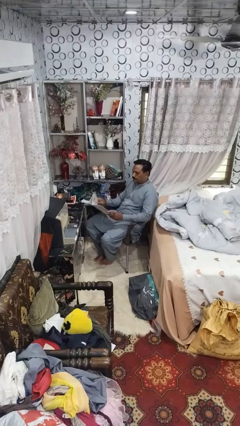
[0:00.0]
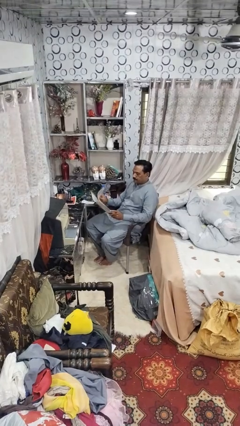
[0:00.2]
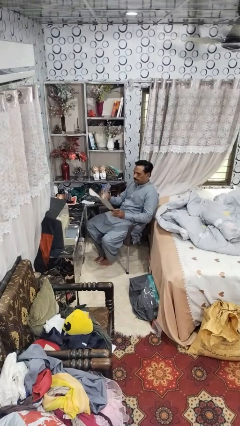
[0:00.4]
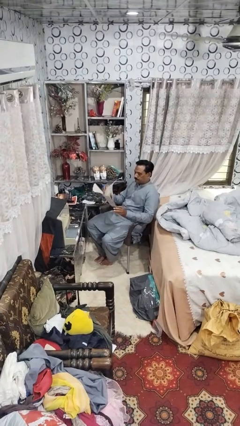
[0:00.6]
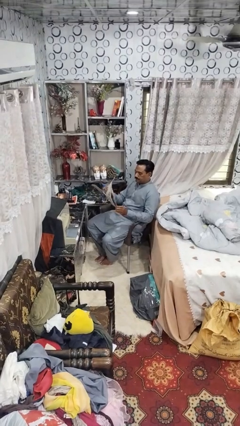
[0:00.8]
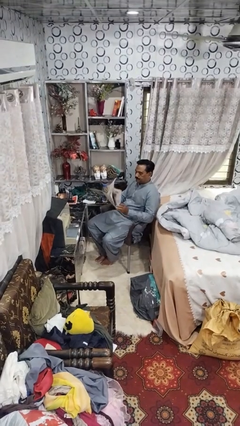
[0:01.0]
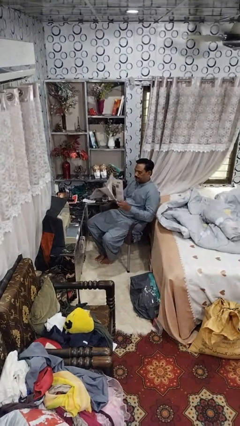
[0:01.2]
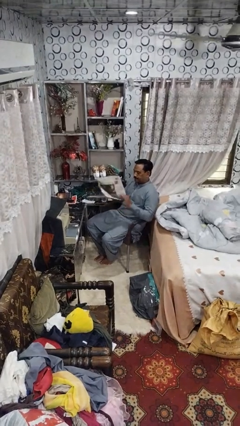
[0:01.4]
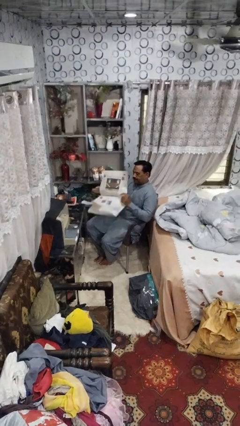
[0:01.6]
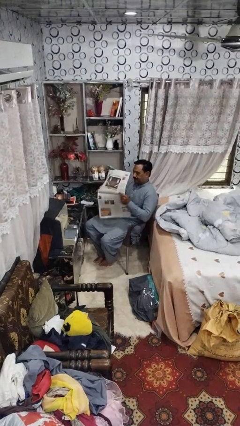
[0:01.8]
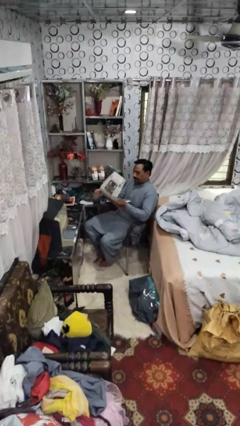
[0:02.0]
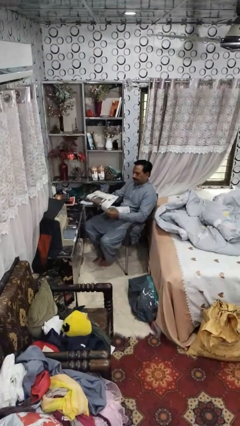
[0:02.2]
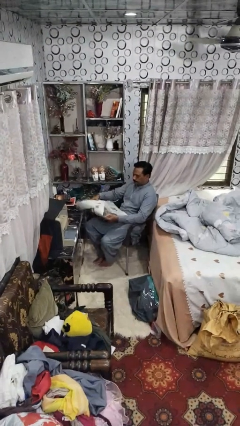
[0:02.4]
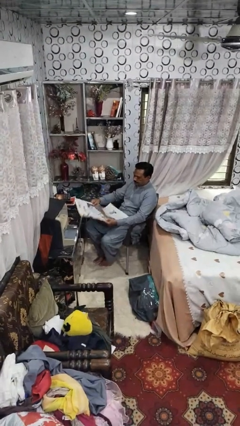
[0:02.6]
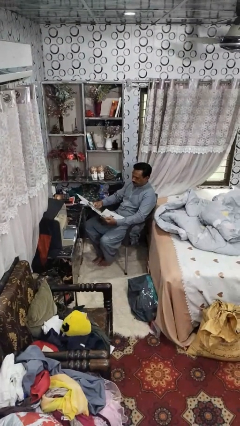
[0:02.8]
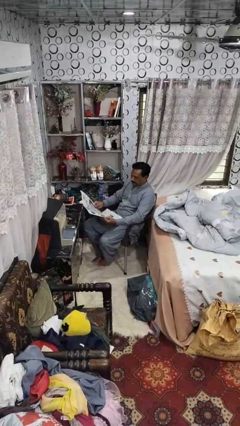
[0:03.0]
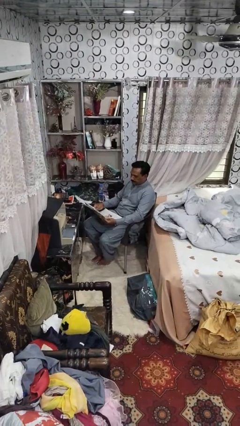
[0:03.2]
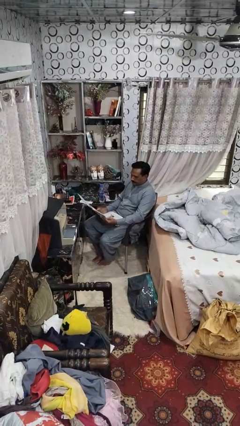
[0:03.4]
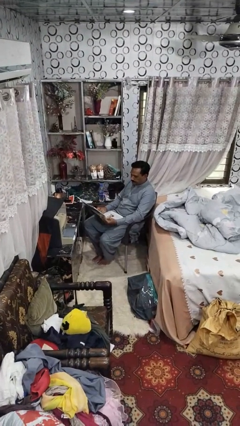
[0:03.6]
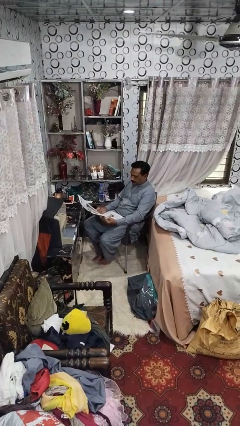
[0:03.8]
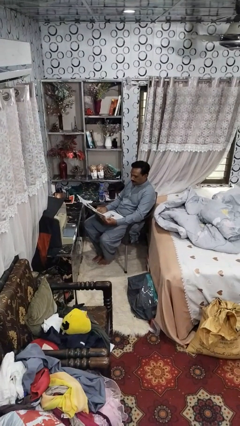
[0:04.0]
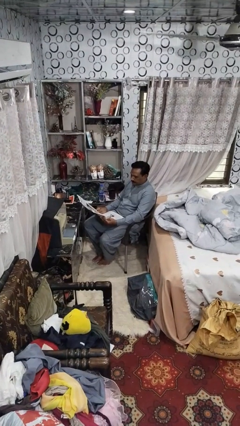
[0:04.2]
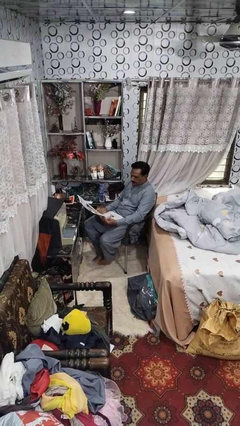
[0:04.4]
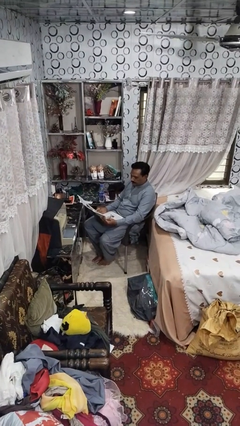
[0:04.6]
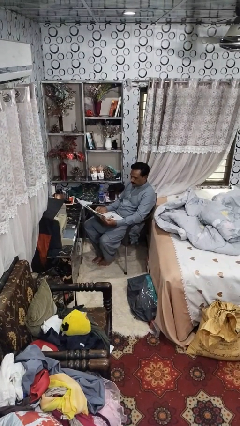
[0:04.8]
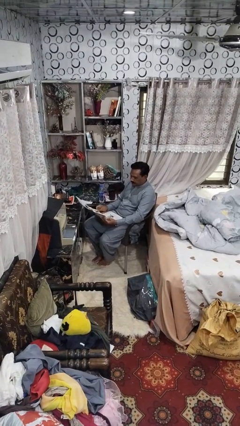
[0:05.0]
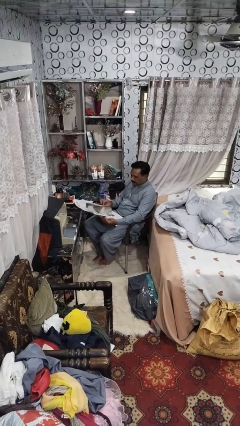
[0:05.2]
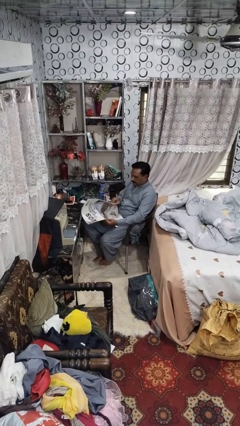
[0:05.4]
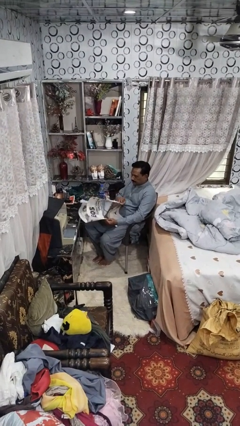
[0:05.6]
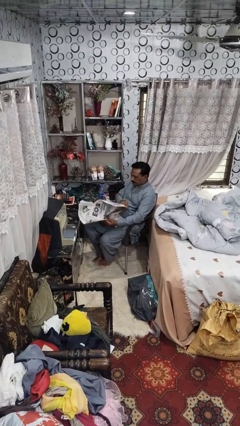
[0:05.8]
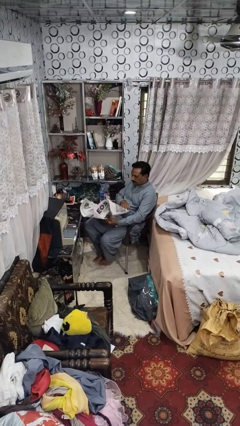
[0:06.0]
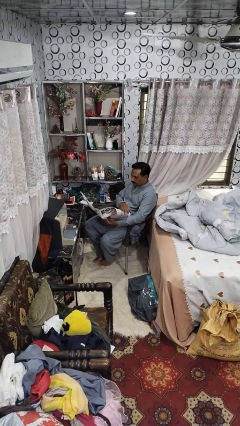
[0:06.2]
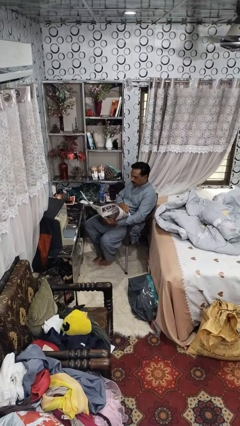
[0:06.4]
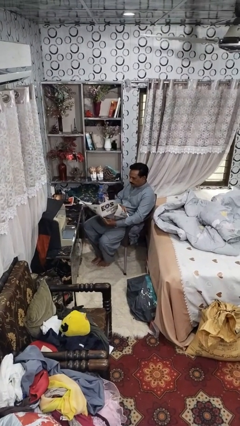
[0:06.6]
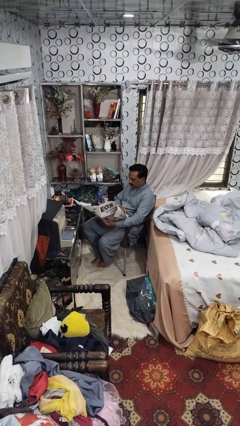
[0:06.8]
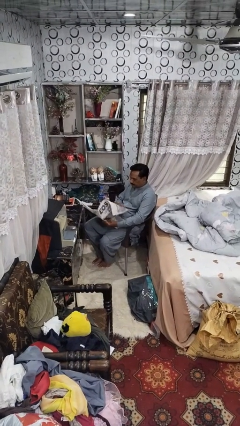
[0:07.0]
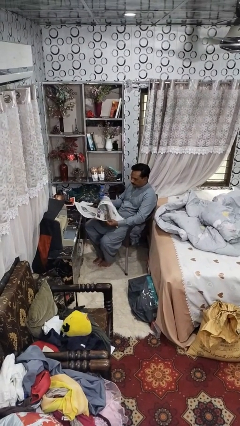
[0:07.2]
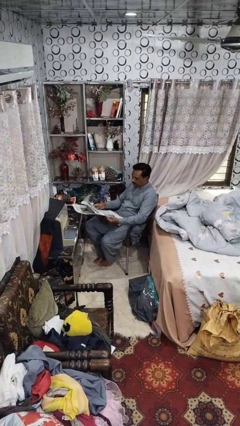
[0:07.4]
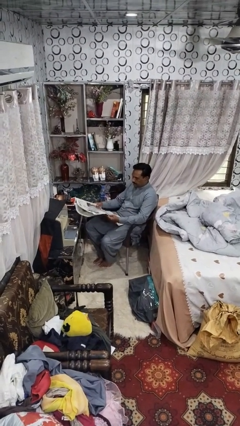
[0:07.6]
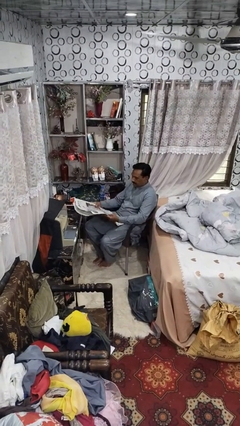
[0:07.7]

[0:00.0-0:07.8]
person reads newspaper

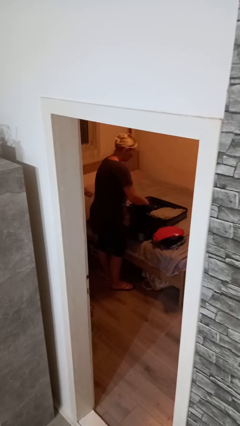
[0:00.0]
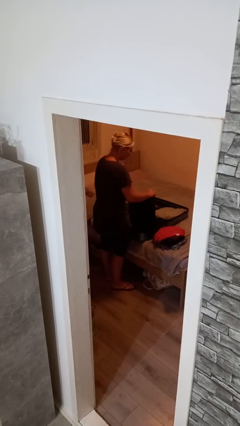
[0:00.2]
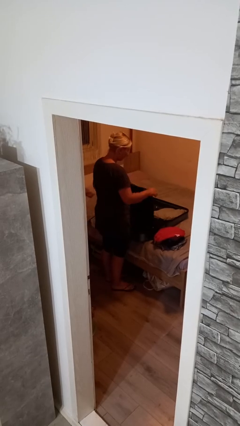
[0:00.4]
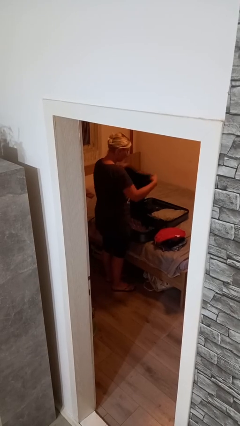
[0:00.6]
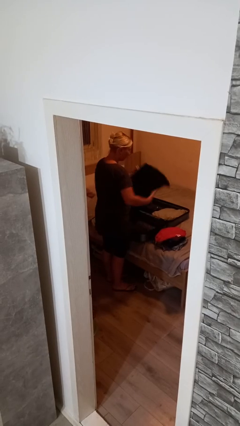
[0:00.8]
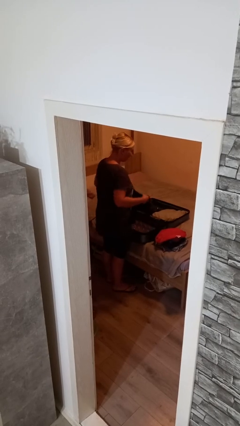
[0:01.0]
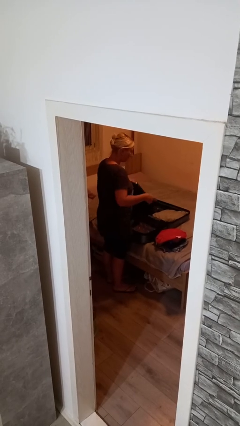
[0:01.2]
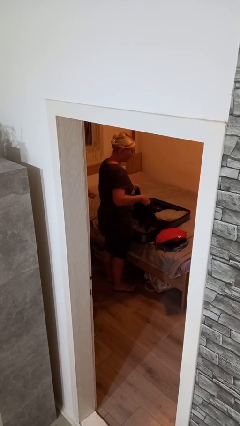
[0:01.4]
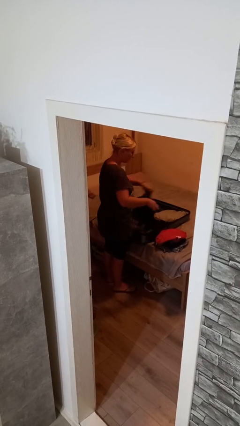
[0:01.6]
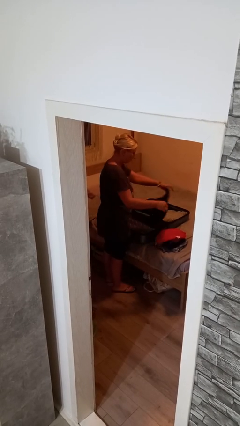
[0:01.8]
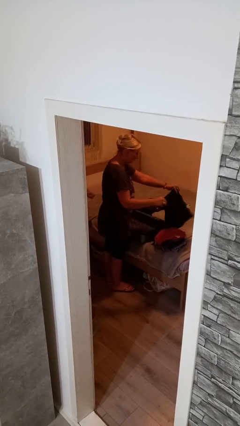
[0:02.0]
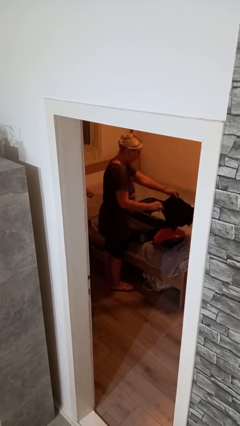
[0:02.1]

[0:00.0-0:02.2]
person unloads clothes from suitcase

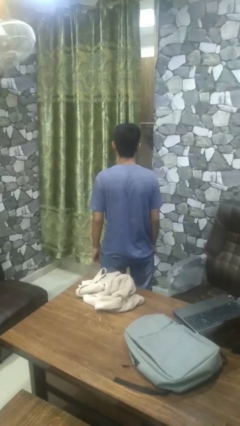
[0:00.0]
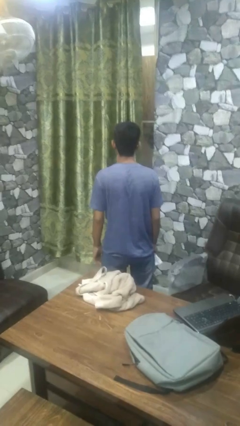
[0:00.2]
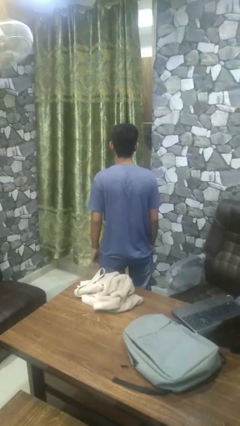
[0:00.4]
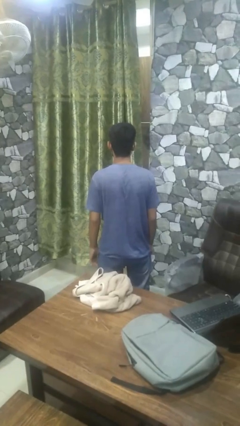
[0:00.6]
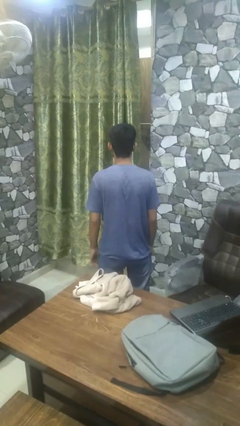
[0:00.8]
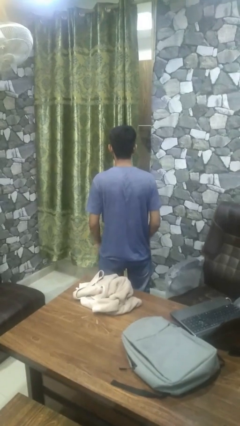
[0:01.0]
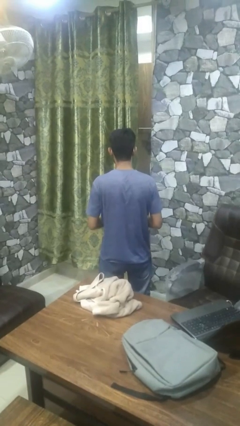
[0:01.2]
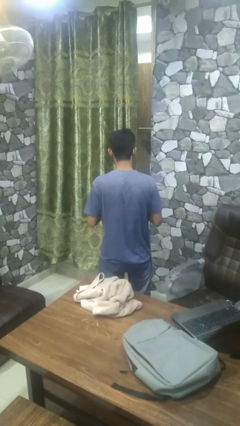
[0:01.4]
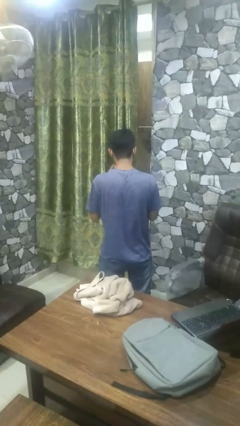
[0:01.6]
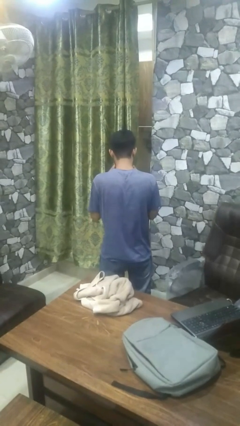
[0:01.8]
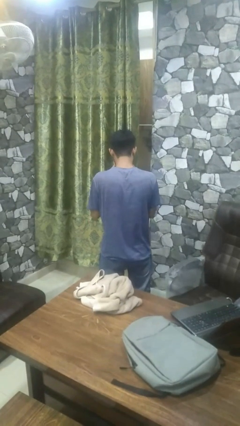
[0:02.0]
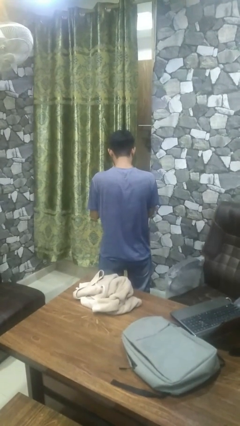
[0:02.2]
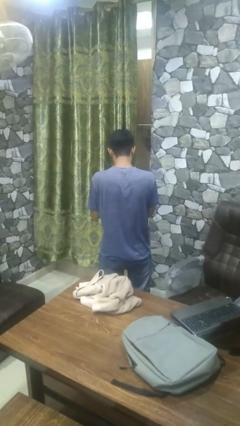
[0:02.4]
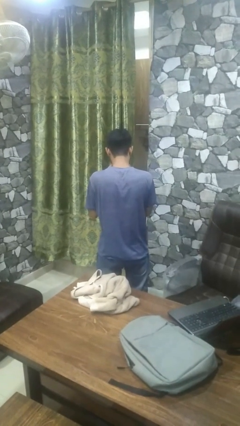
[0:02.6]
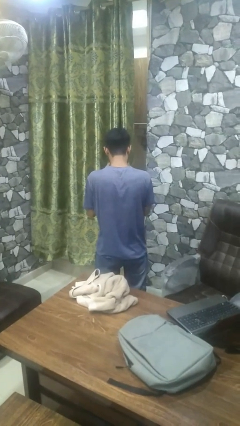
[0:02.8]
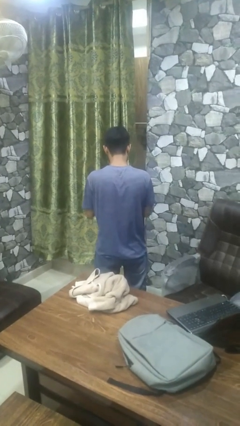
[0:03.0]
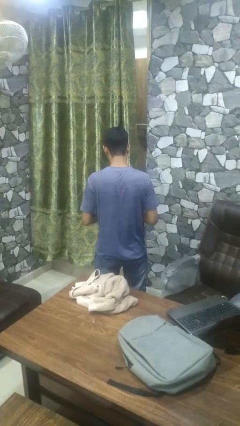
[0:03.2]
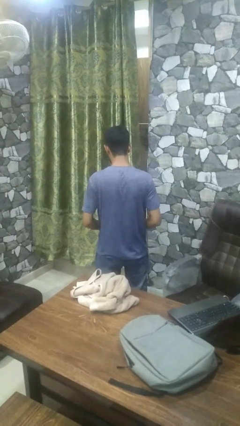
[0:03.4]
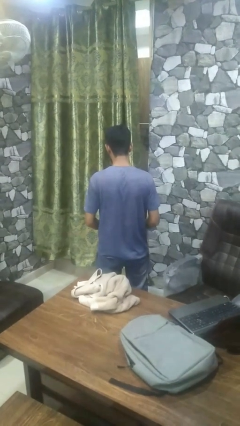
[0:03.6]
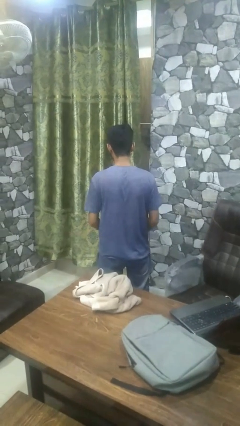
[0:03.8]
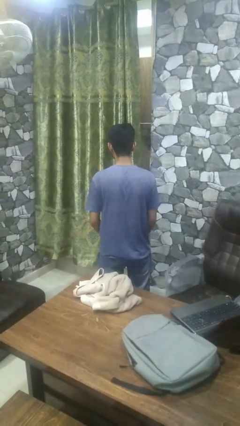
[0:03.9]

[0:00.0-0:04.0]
person blows nose

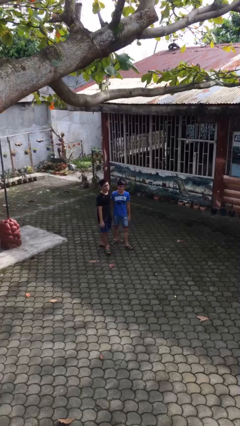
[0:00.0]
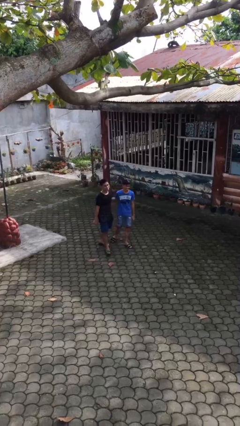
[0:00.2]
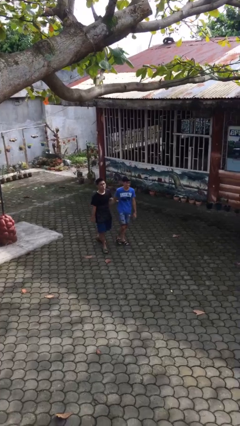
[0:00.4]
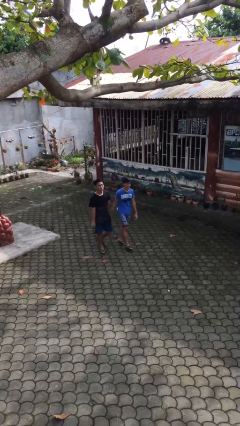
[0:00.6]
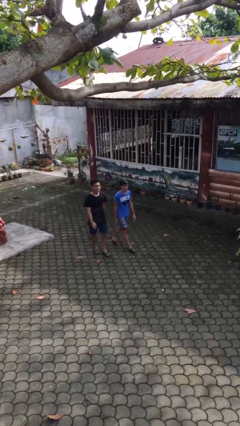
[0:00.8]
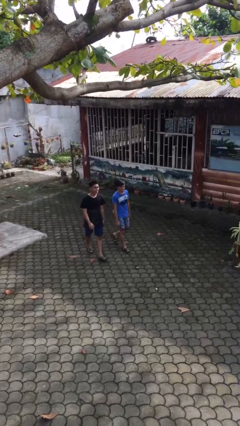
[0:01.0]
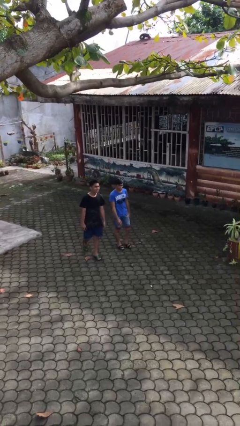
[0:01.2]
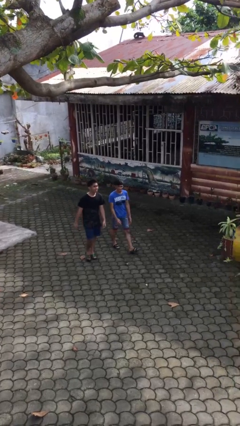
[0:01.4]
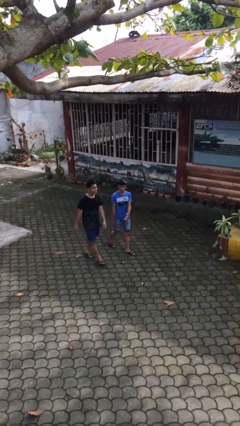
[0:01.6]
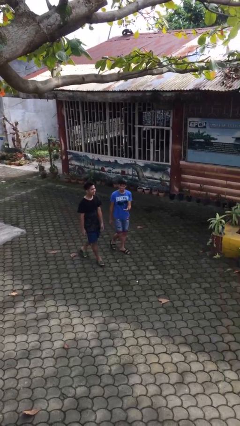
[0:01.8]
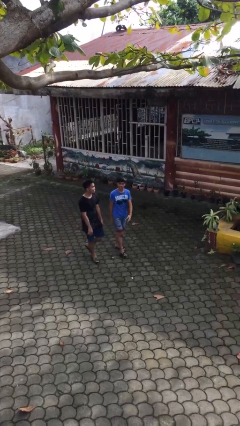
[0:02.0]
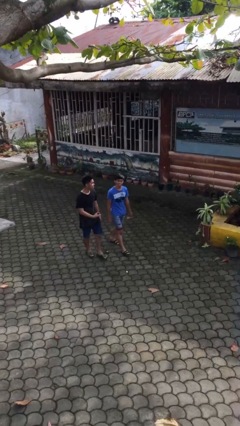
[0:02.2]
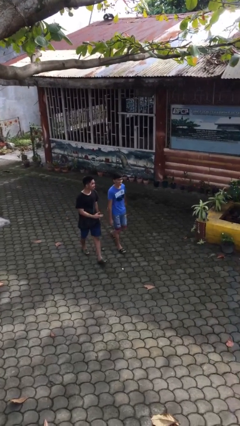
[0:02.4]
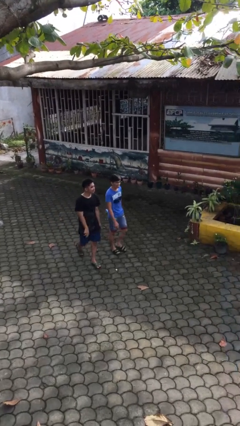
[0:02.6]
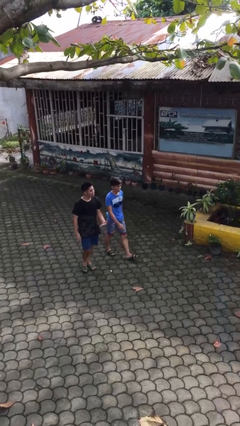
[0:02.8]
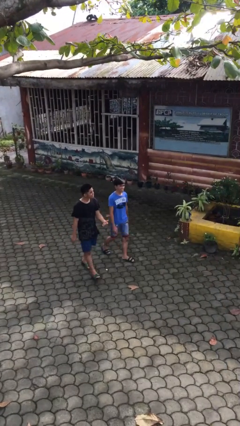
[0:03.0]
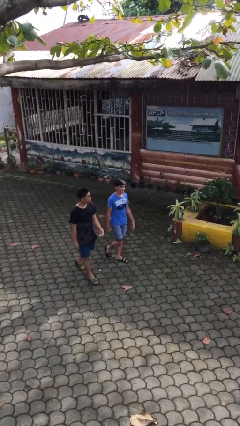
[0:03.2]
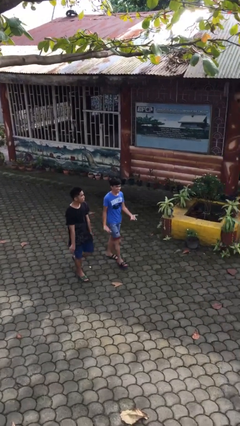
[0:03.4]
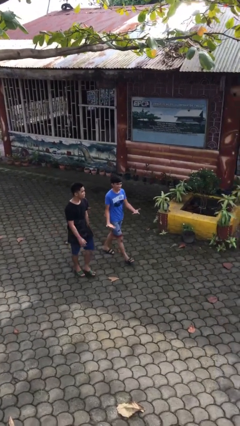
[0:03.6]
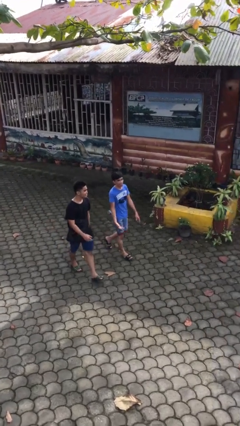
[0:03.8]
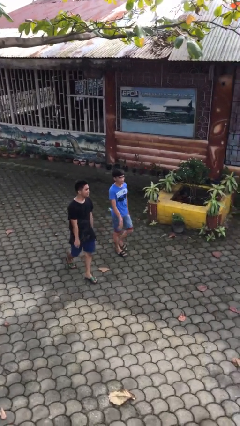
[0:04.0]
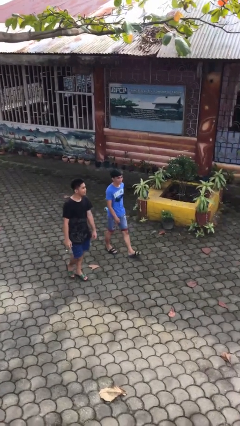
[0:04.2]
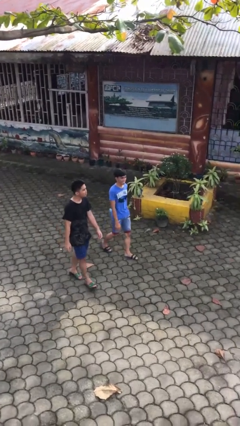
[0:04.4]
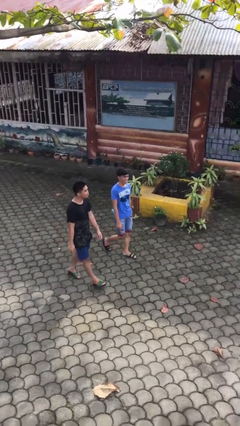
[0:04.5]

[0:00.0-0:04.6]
person talks to person
